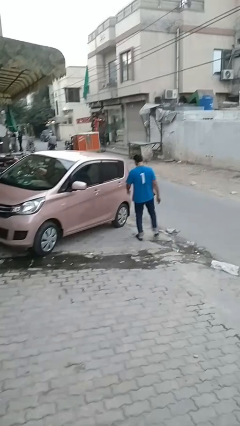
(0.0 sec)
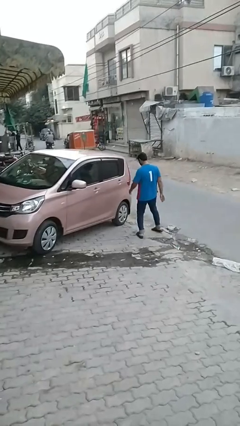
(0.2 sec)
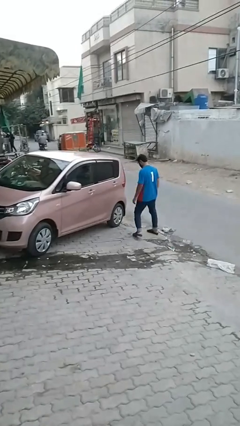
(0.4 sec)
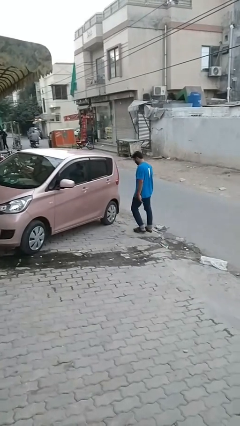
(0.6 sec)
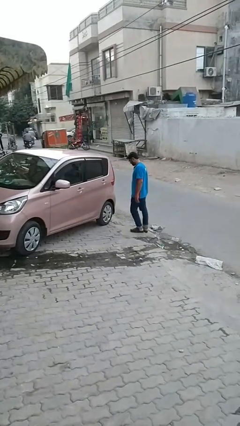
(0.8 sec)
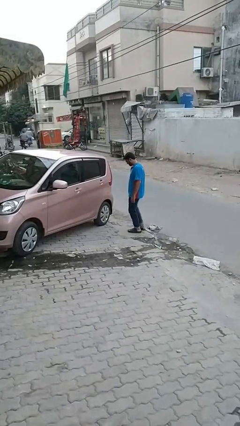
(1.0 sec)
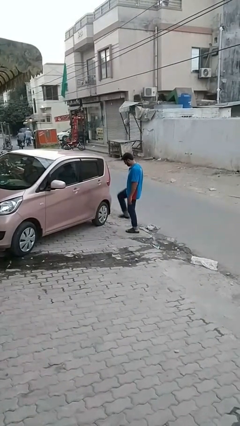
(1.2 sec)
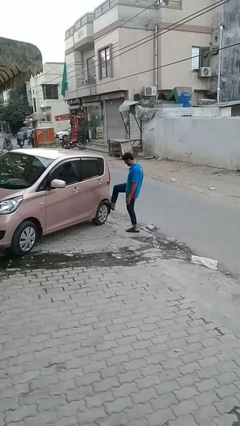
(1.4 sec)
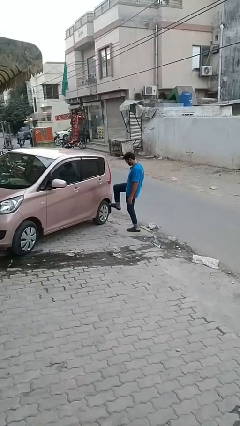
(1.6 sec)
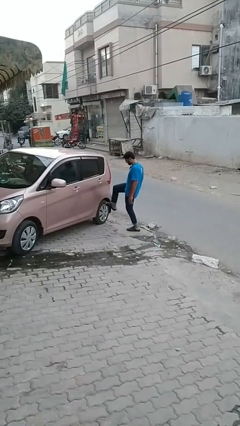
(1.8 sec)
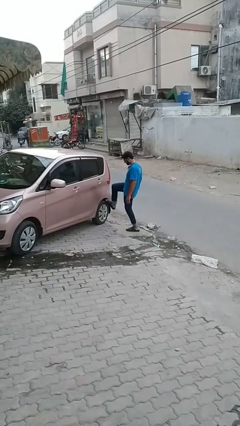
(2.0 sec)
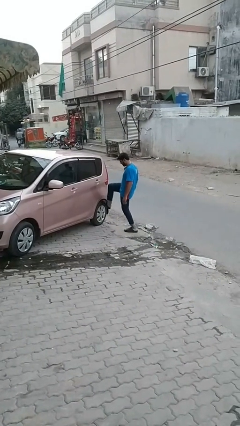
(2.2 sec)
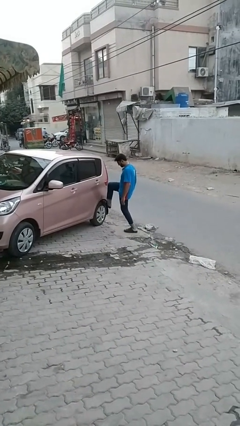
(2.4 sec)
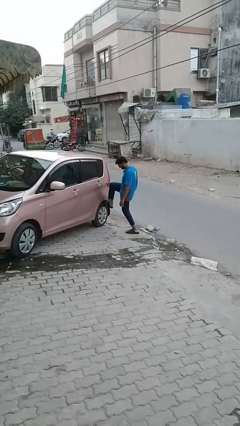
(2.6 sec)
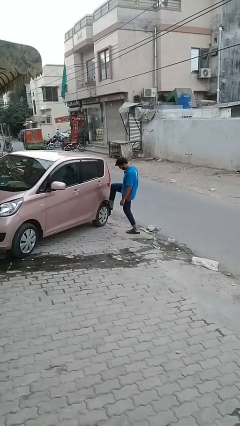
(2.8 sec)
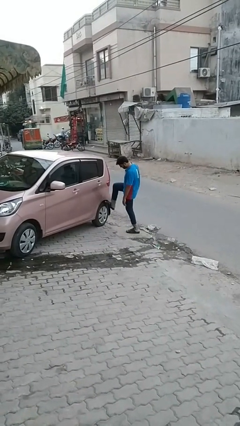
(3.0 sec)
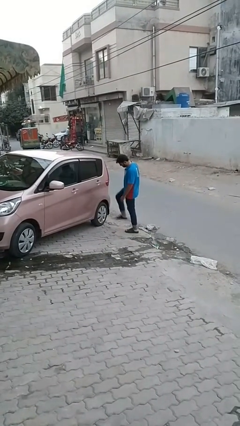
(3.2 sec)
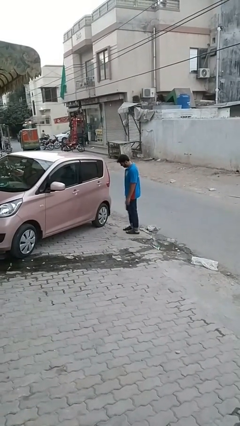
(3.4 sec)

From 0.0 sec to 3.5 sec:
person kicks car tires

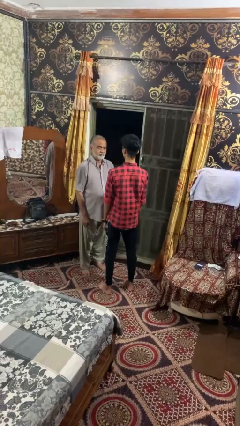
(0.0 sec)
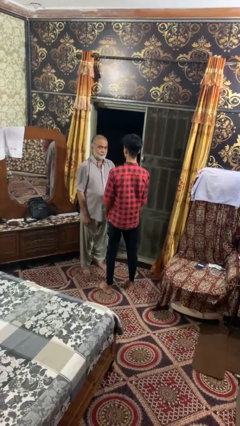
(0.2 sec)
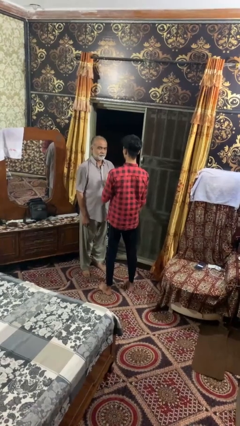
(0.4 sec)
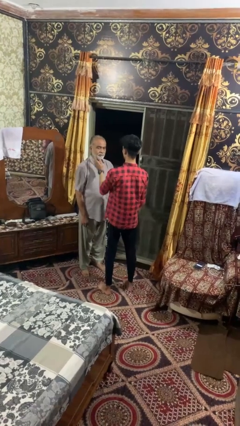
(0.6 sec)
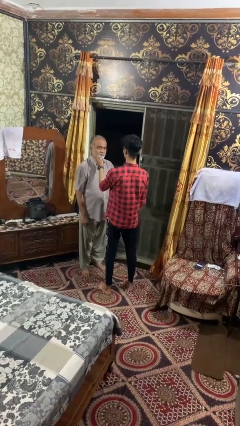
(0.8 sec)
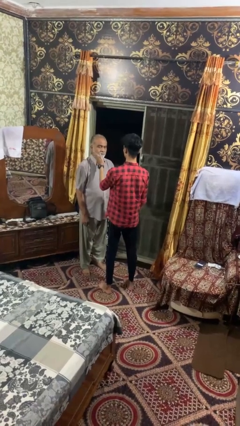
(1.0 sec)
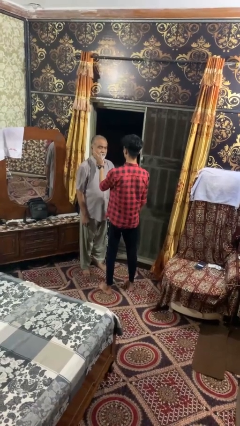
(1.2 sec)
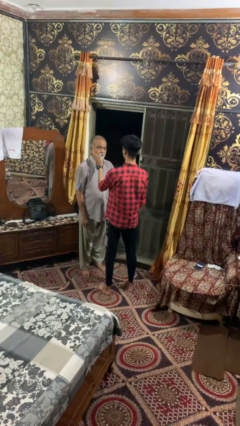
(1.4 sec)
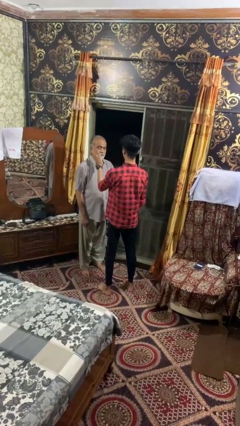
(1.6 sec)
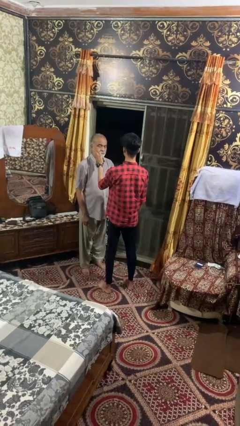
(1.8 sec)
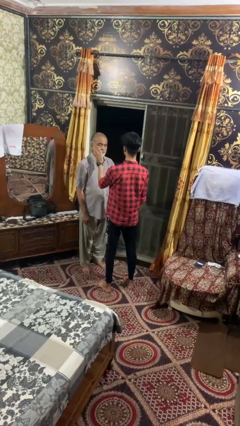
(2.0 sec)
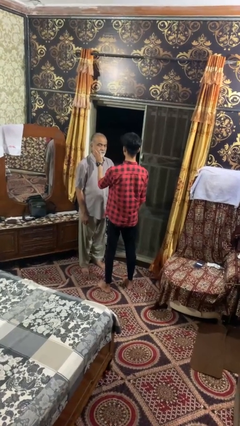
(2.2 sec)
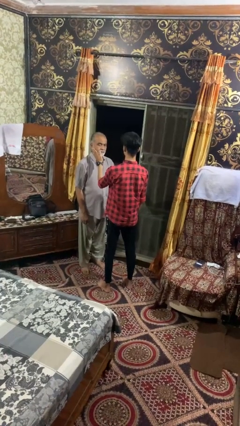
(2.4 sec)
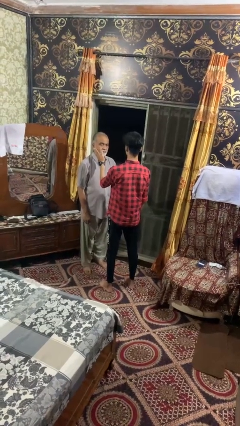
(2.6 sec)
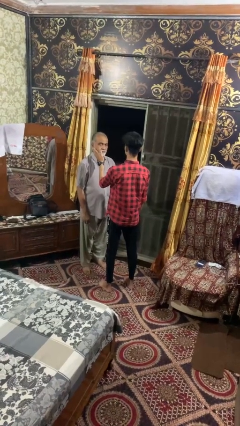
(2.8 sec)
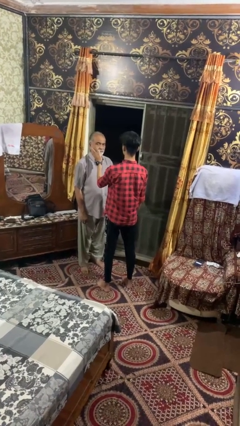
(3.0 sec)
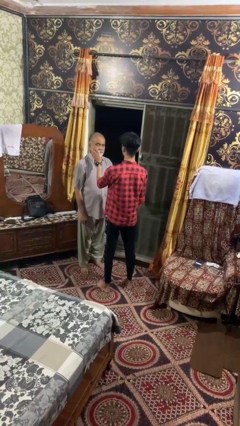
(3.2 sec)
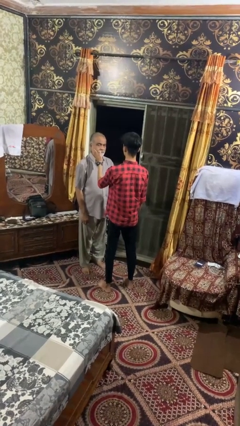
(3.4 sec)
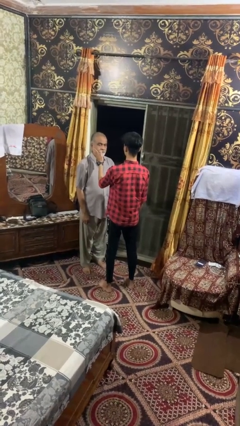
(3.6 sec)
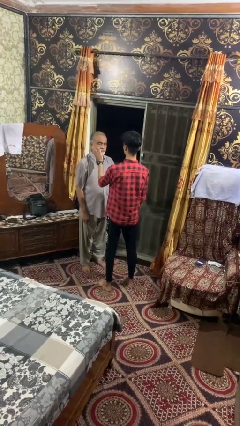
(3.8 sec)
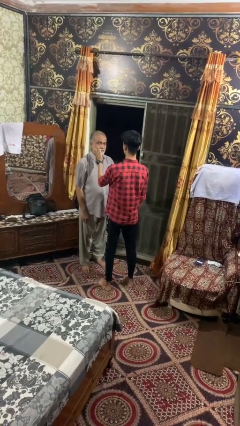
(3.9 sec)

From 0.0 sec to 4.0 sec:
person touches face of person

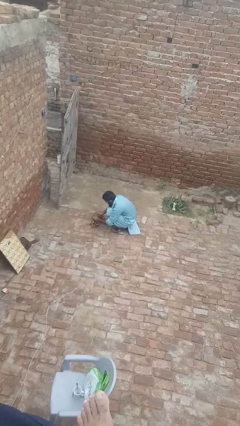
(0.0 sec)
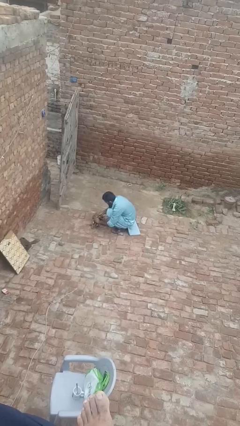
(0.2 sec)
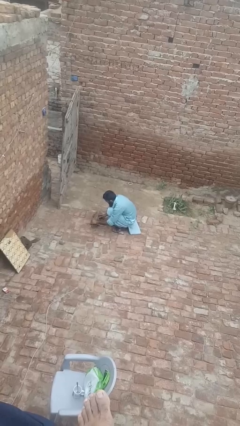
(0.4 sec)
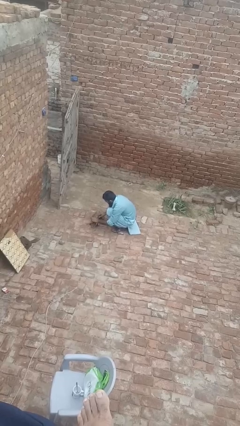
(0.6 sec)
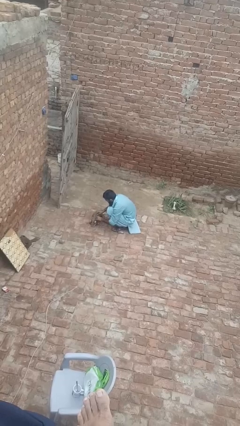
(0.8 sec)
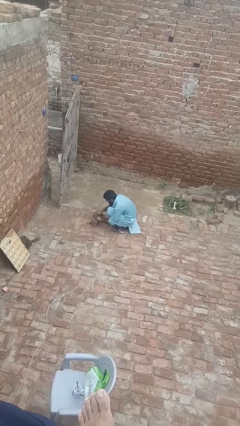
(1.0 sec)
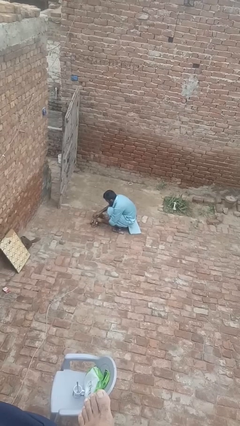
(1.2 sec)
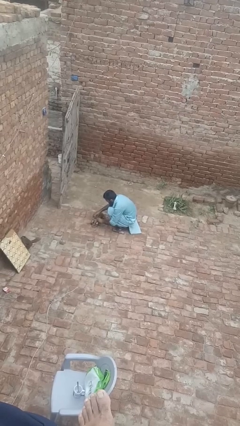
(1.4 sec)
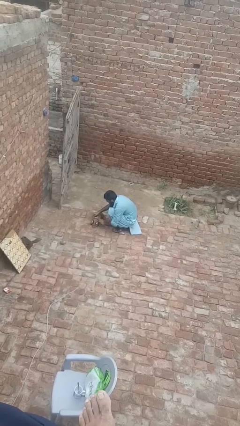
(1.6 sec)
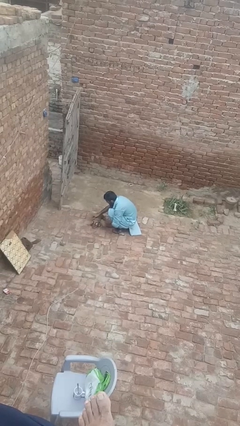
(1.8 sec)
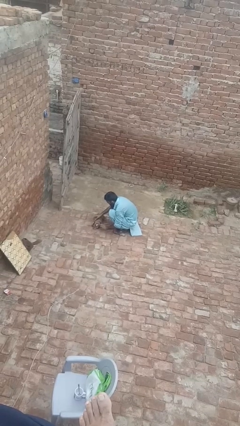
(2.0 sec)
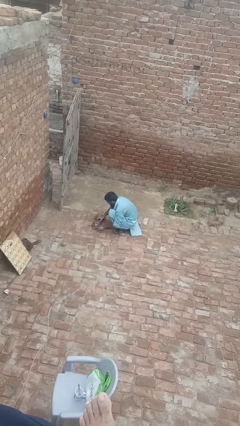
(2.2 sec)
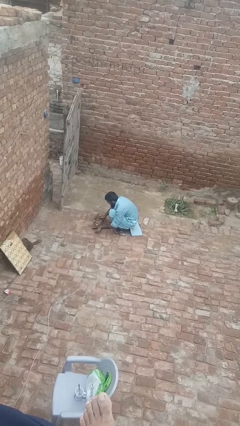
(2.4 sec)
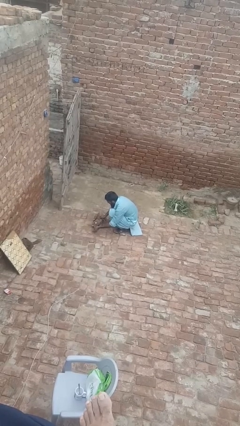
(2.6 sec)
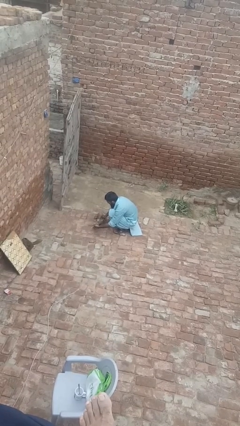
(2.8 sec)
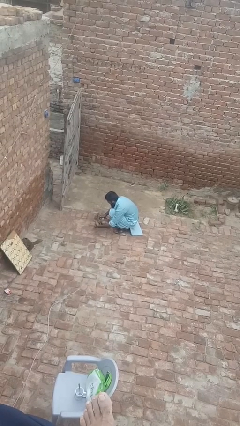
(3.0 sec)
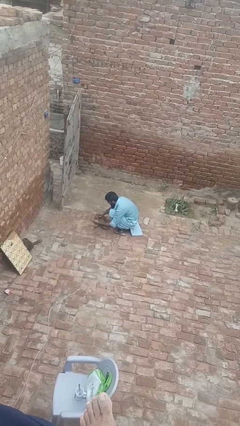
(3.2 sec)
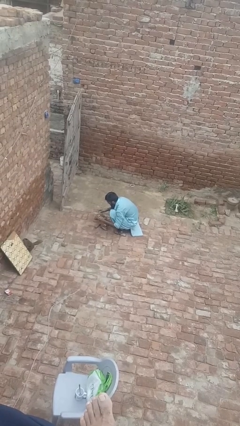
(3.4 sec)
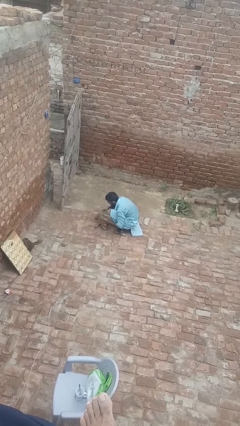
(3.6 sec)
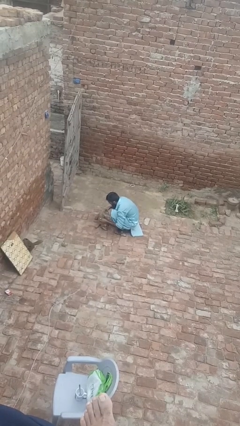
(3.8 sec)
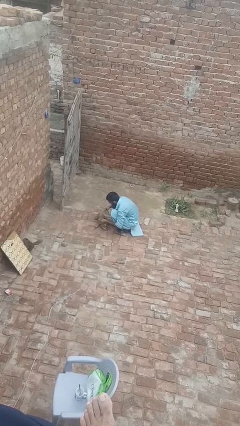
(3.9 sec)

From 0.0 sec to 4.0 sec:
person unattaches leash from dog

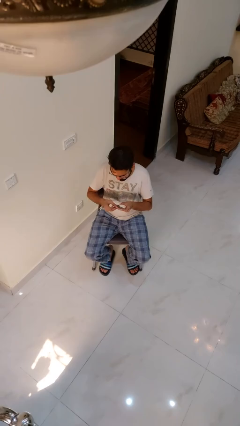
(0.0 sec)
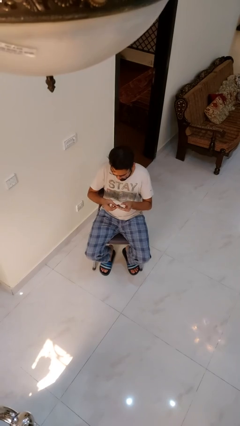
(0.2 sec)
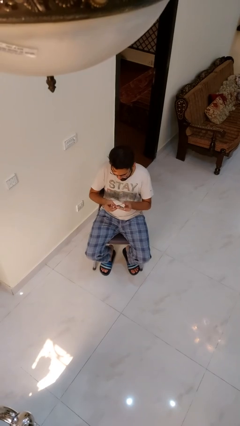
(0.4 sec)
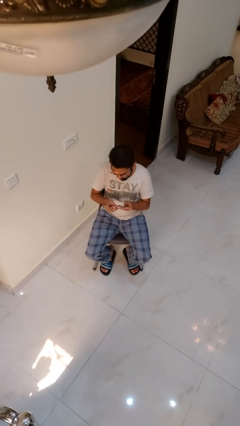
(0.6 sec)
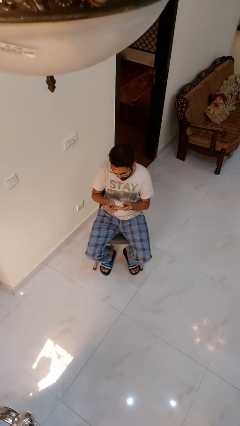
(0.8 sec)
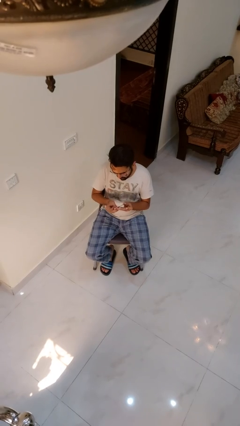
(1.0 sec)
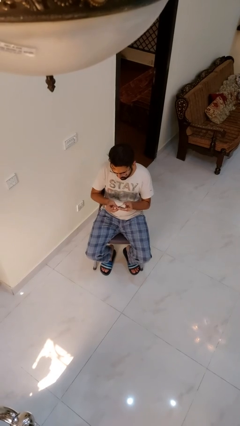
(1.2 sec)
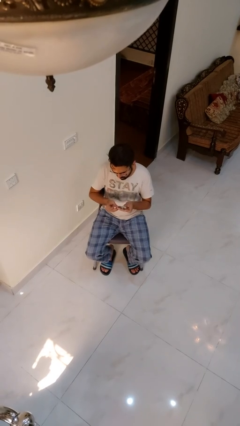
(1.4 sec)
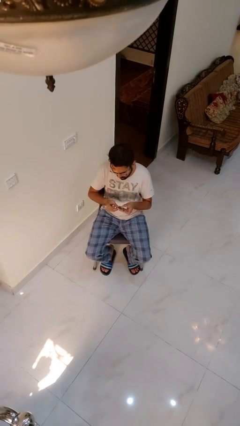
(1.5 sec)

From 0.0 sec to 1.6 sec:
person clips fingernails

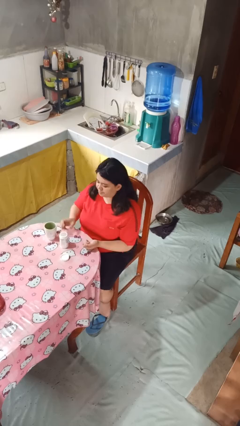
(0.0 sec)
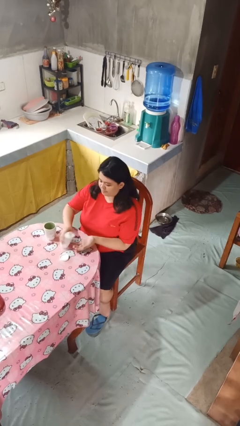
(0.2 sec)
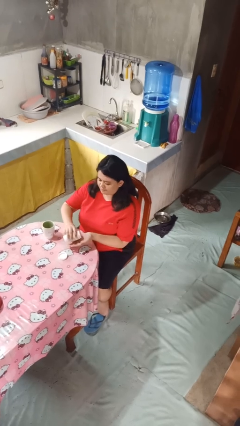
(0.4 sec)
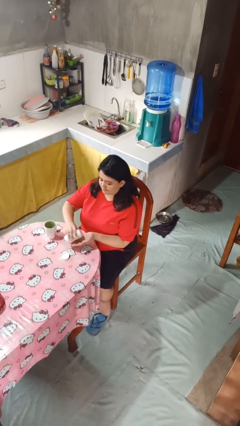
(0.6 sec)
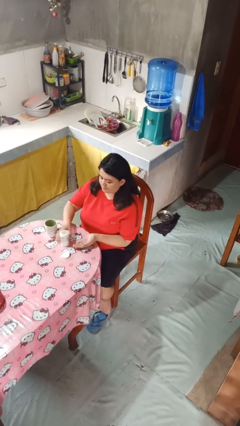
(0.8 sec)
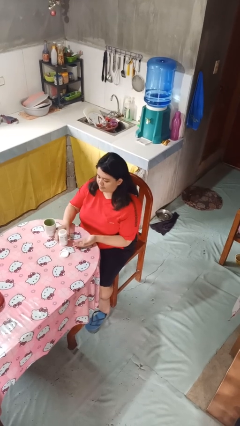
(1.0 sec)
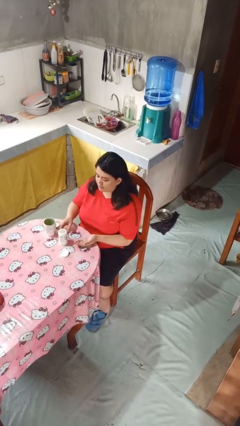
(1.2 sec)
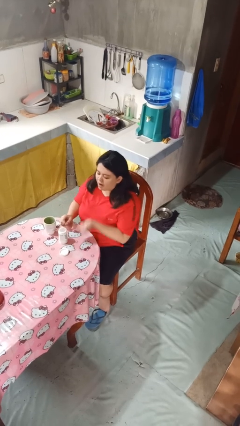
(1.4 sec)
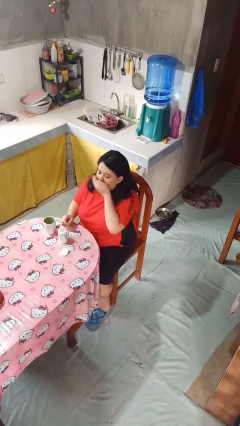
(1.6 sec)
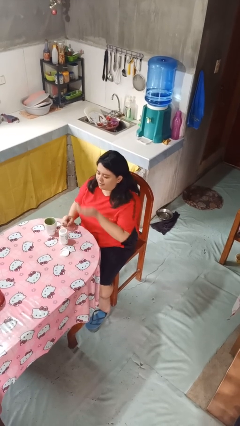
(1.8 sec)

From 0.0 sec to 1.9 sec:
person takes medicine pills

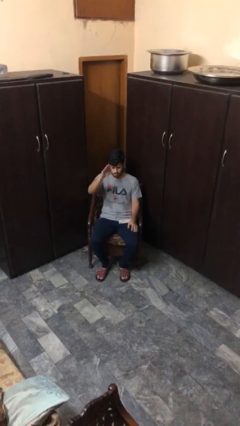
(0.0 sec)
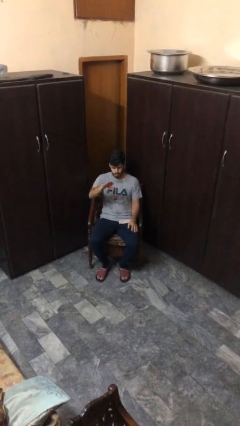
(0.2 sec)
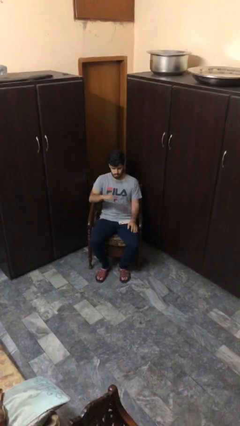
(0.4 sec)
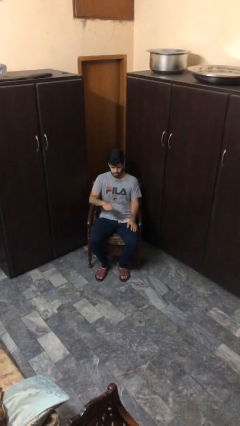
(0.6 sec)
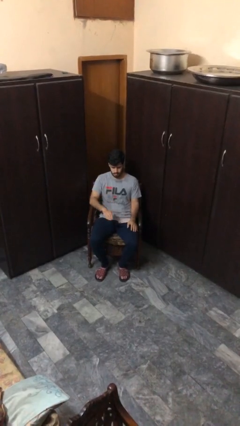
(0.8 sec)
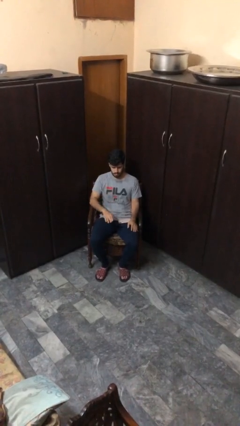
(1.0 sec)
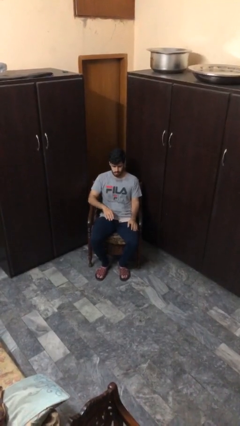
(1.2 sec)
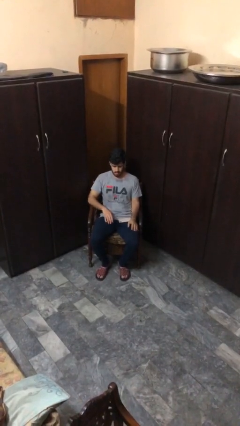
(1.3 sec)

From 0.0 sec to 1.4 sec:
person gestures swipe down

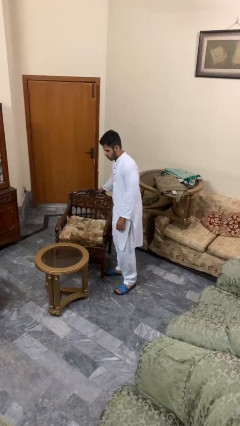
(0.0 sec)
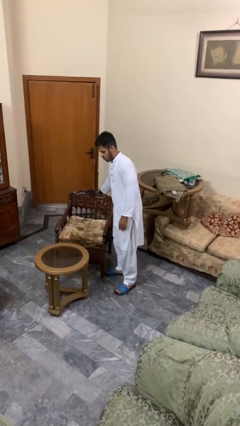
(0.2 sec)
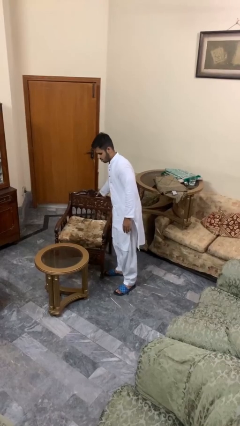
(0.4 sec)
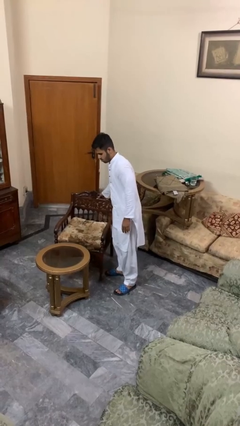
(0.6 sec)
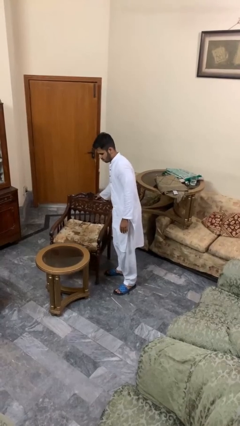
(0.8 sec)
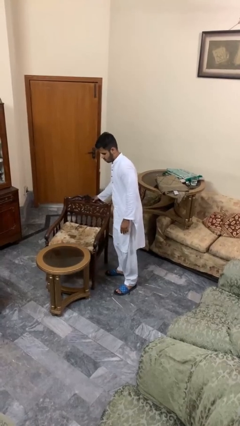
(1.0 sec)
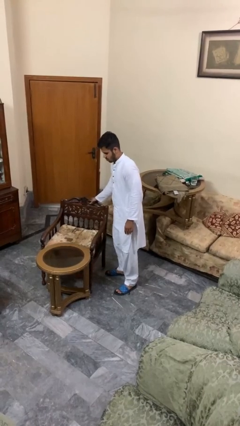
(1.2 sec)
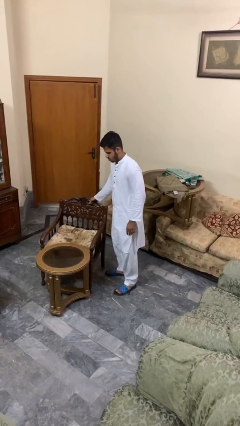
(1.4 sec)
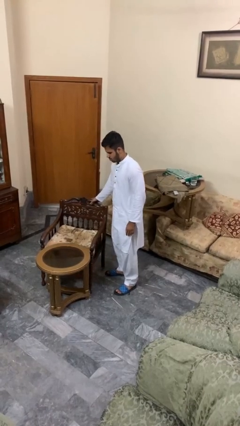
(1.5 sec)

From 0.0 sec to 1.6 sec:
person pushes in chair
